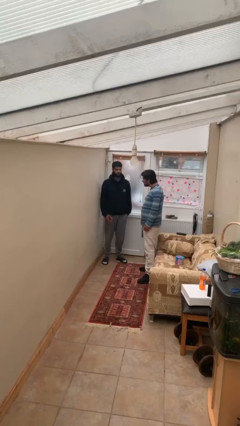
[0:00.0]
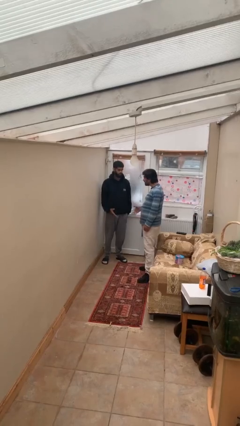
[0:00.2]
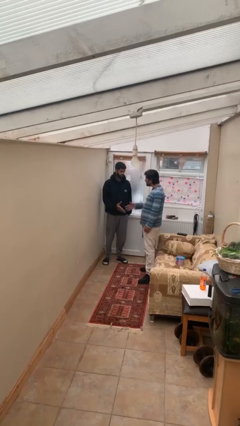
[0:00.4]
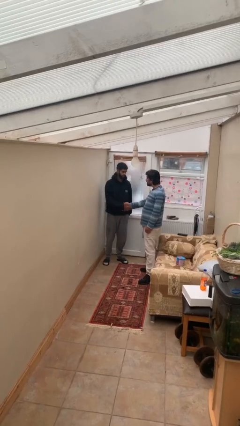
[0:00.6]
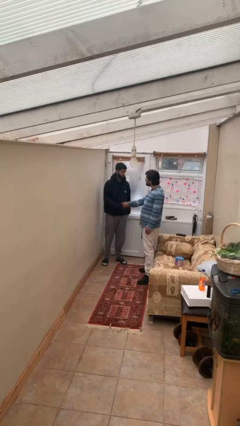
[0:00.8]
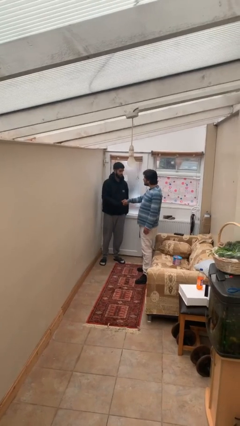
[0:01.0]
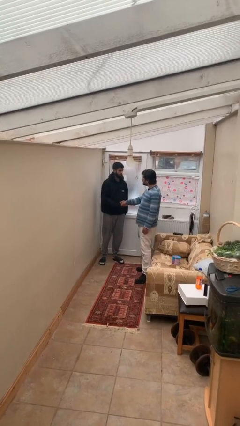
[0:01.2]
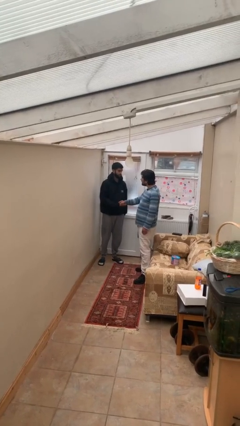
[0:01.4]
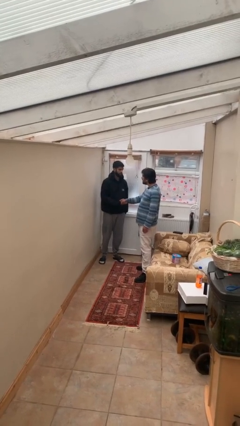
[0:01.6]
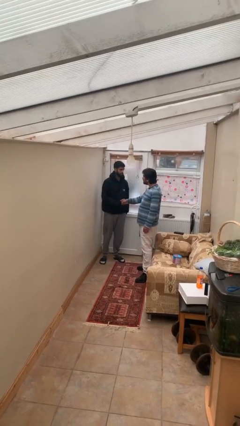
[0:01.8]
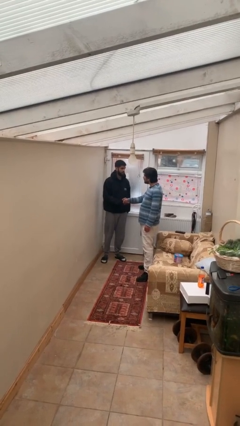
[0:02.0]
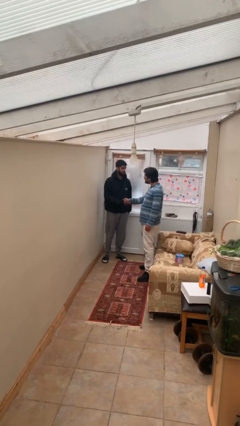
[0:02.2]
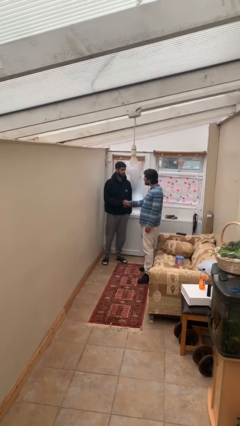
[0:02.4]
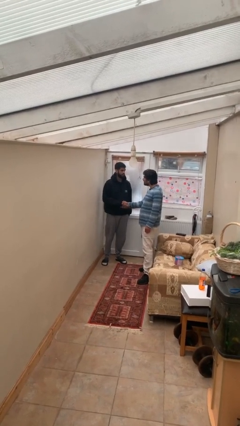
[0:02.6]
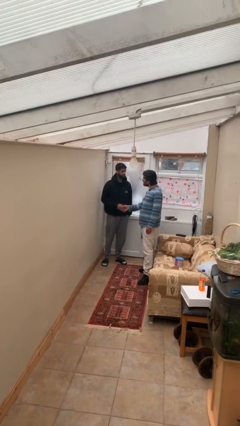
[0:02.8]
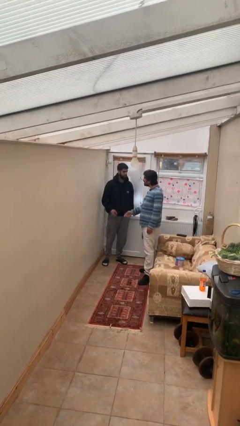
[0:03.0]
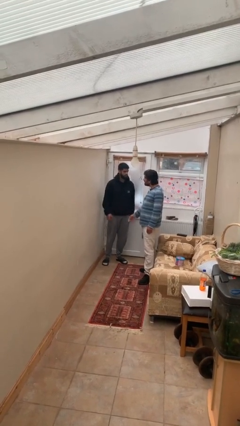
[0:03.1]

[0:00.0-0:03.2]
person shakes hand

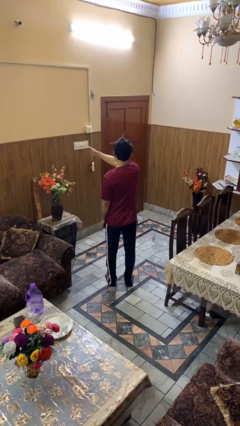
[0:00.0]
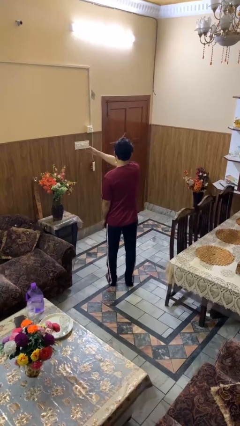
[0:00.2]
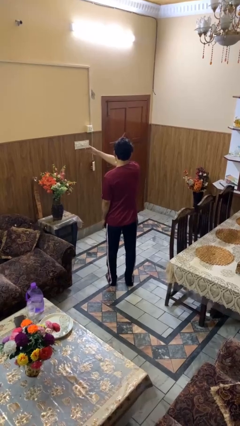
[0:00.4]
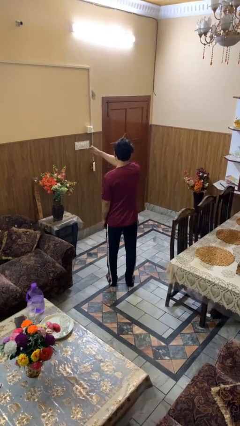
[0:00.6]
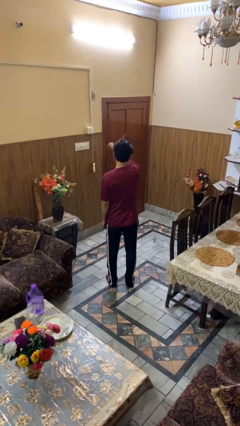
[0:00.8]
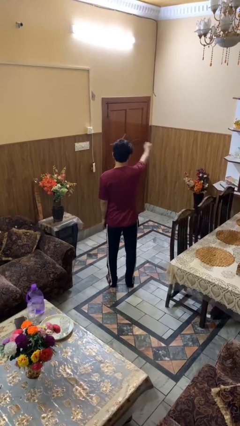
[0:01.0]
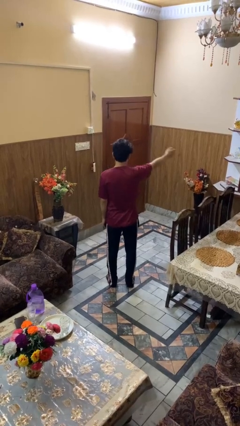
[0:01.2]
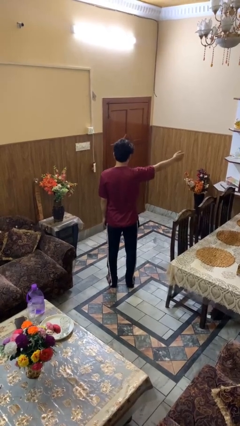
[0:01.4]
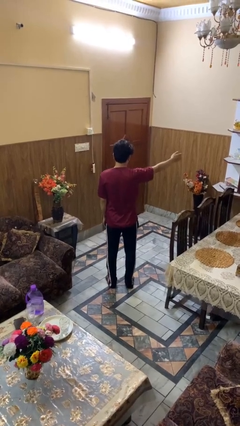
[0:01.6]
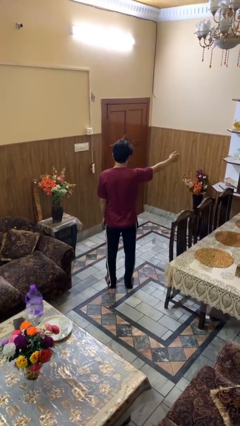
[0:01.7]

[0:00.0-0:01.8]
person gestures swipe right

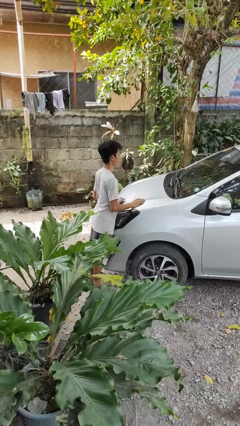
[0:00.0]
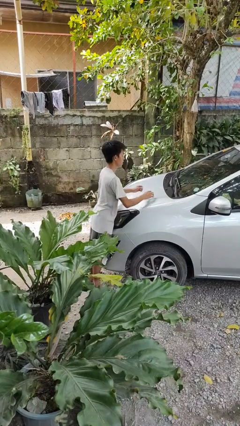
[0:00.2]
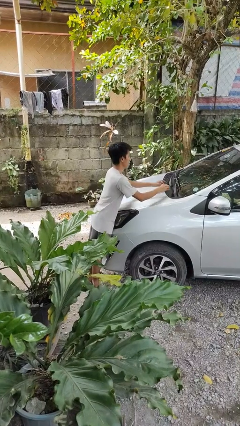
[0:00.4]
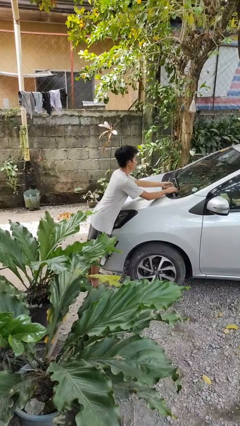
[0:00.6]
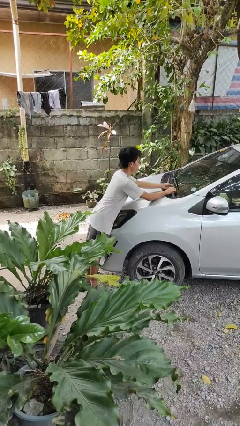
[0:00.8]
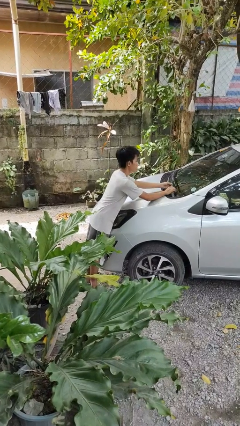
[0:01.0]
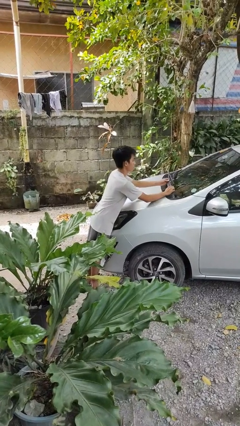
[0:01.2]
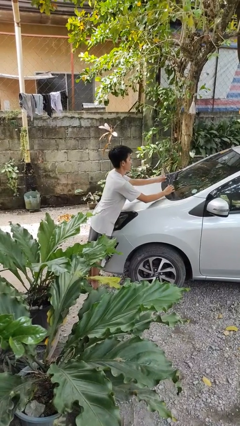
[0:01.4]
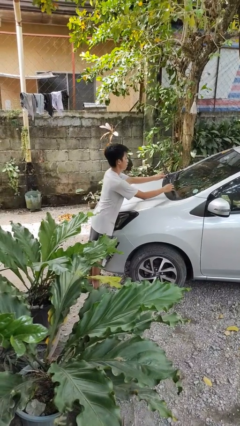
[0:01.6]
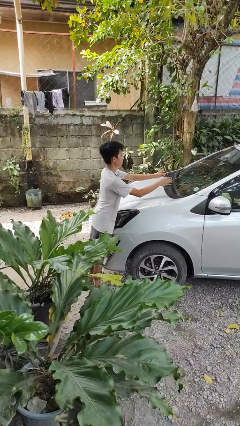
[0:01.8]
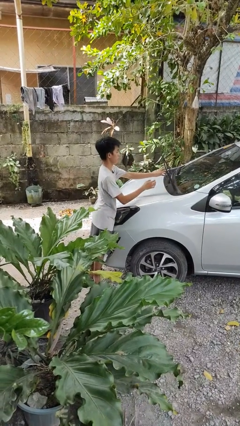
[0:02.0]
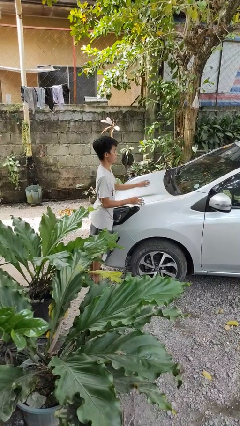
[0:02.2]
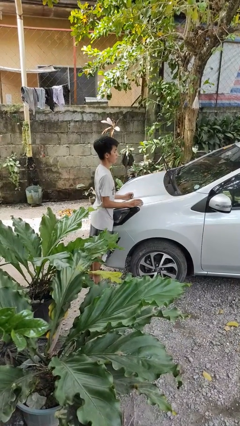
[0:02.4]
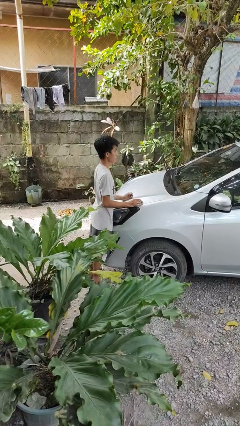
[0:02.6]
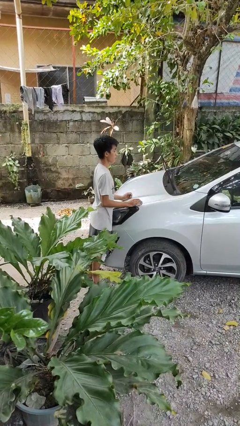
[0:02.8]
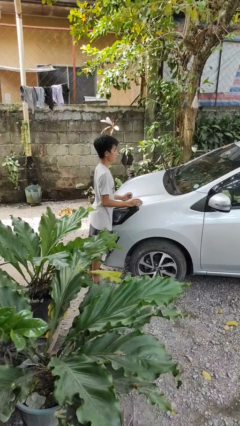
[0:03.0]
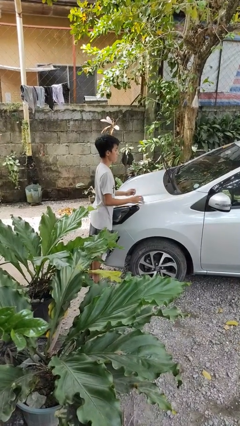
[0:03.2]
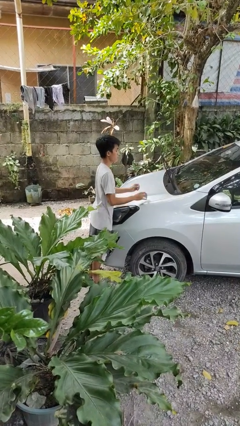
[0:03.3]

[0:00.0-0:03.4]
person flips up car wipers

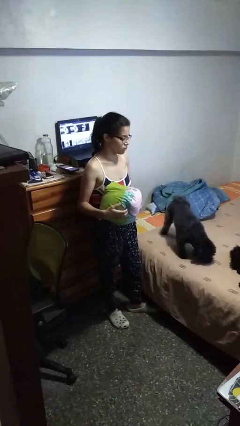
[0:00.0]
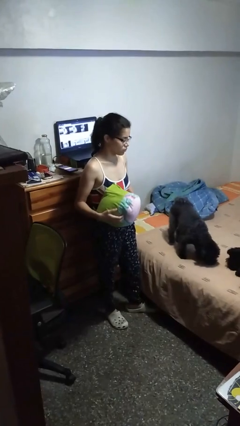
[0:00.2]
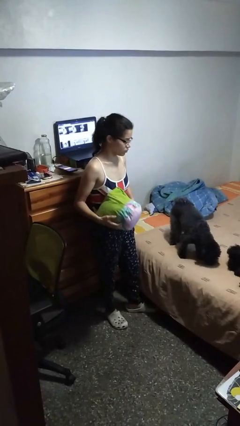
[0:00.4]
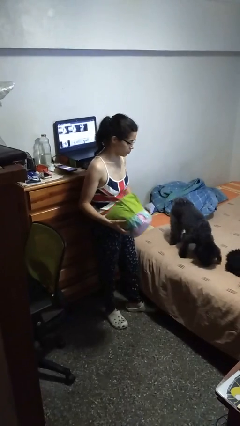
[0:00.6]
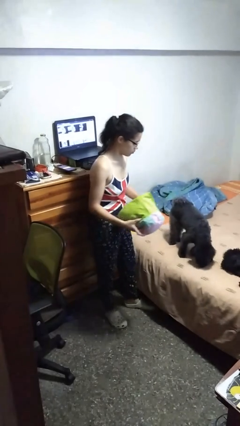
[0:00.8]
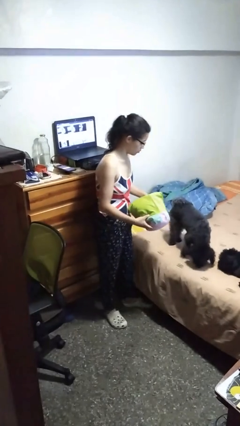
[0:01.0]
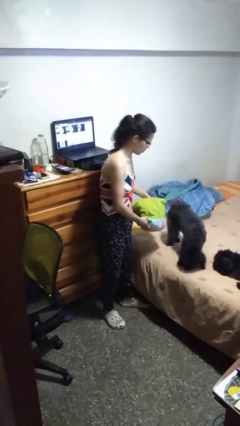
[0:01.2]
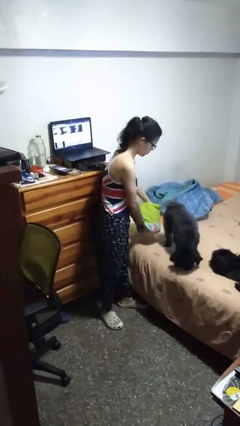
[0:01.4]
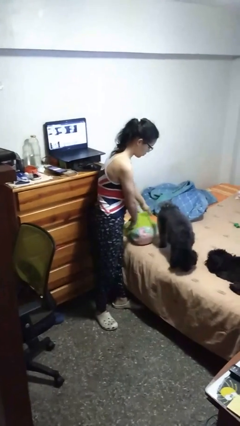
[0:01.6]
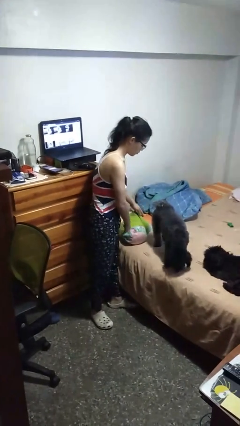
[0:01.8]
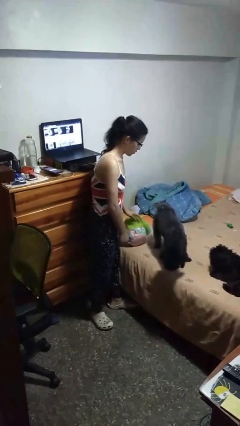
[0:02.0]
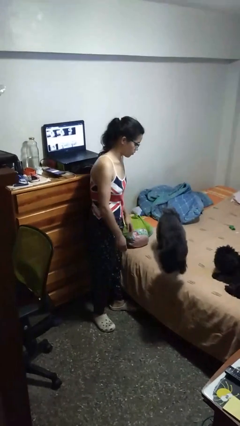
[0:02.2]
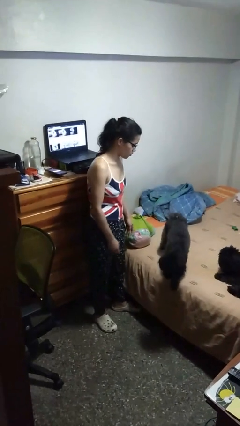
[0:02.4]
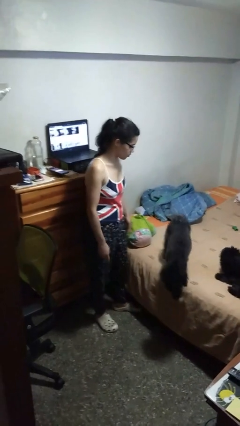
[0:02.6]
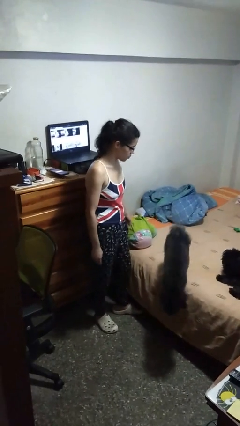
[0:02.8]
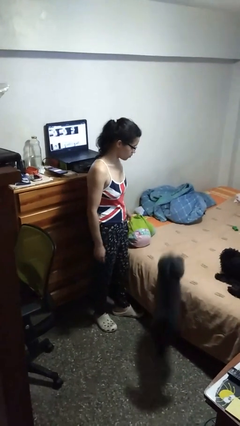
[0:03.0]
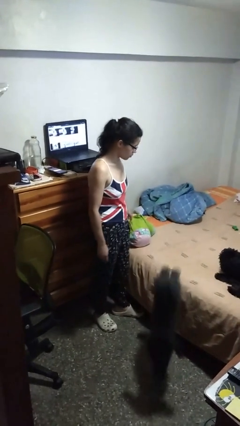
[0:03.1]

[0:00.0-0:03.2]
person puts down object on bed

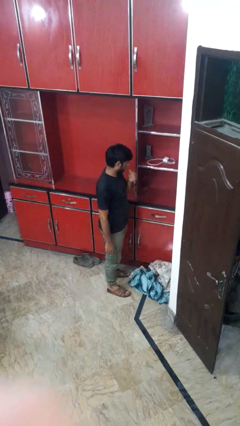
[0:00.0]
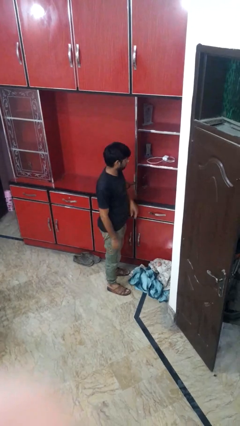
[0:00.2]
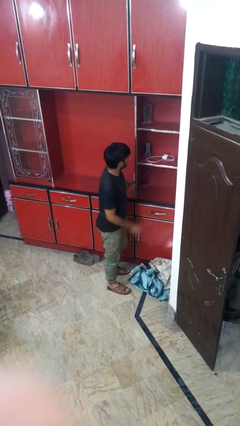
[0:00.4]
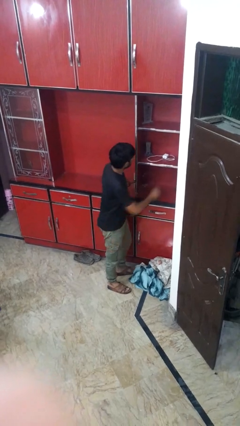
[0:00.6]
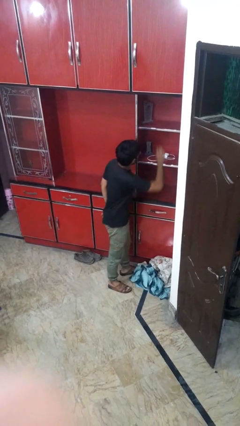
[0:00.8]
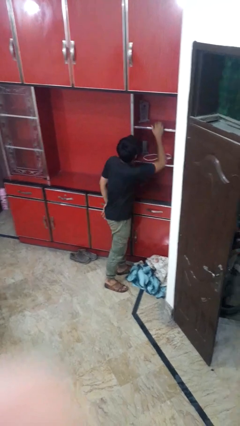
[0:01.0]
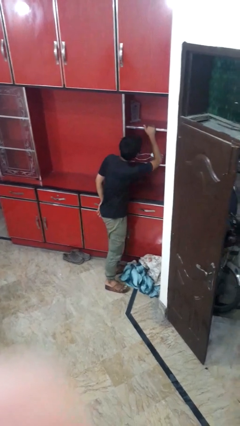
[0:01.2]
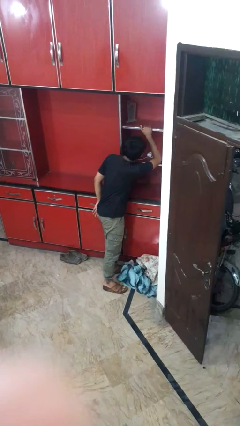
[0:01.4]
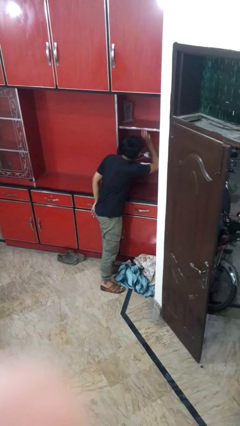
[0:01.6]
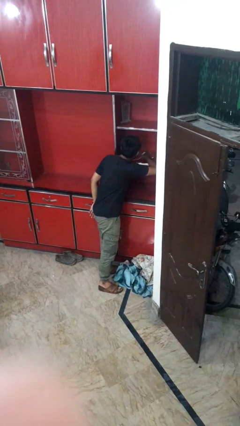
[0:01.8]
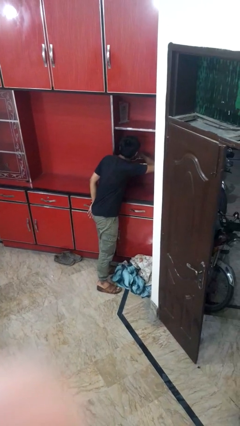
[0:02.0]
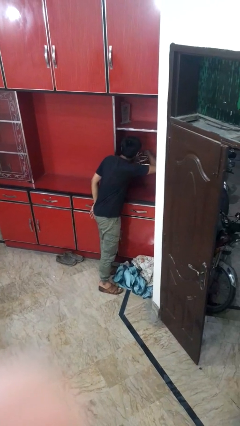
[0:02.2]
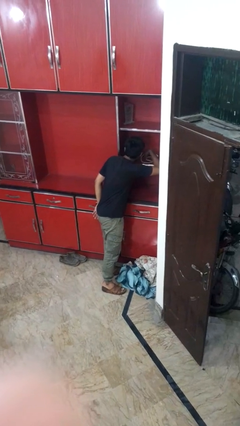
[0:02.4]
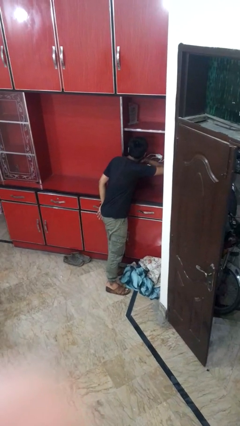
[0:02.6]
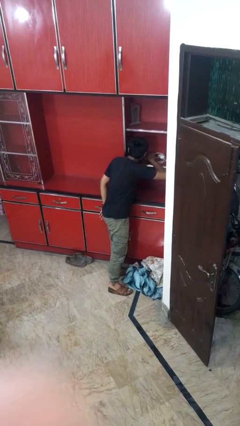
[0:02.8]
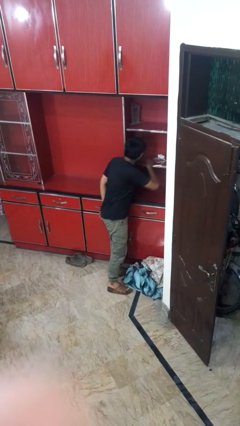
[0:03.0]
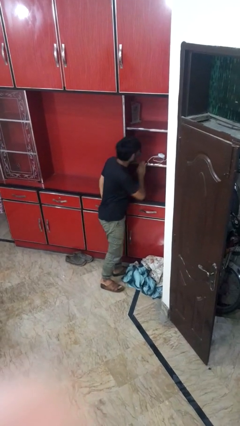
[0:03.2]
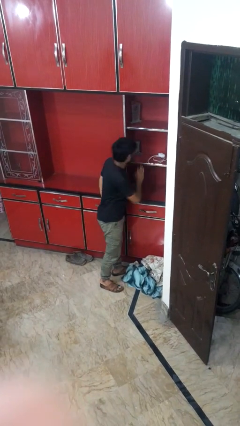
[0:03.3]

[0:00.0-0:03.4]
person searches in cabinet

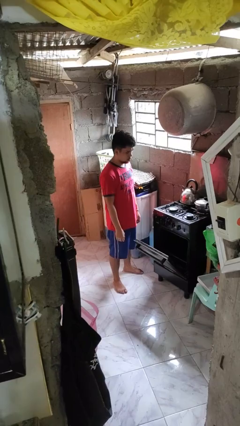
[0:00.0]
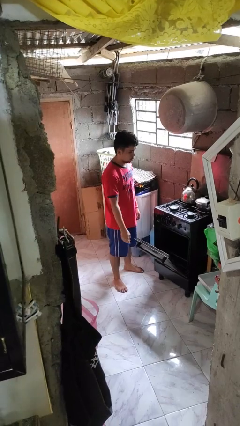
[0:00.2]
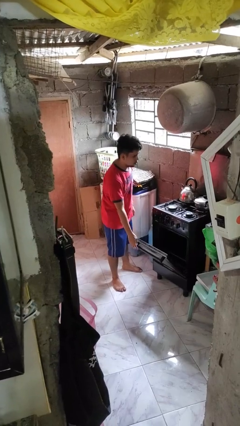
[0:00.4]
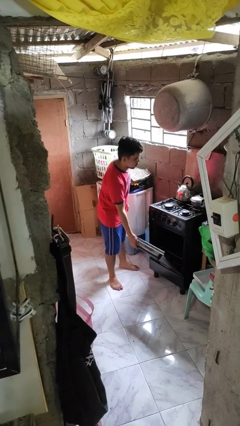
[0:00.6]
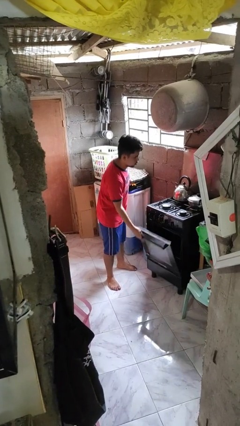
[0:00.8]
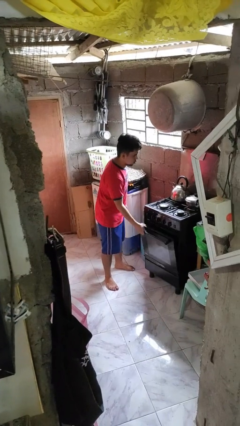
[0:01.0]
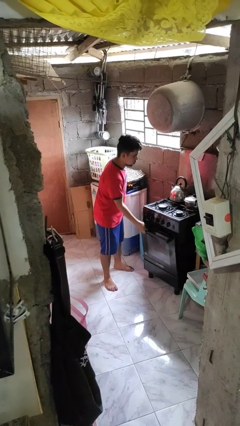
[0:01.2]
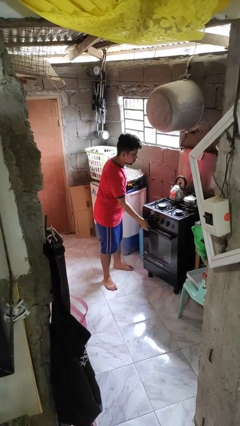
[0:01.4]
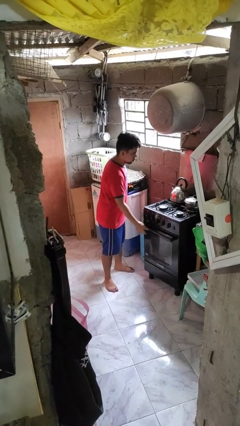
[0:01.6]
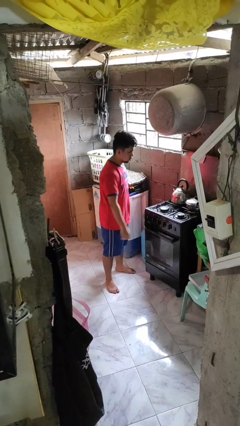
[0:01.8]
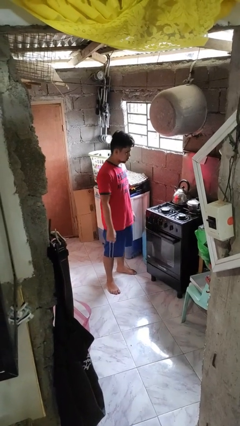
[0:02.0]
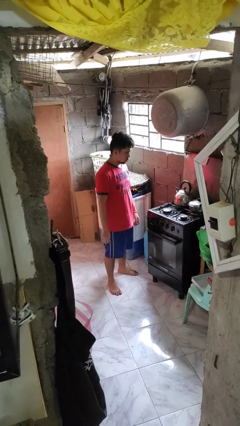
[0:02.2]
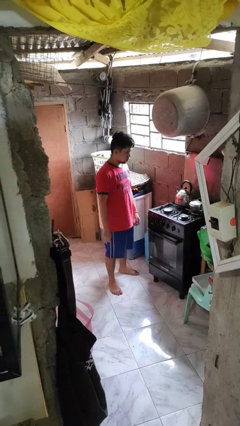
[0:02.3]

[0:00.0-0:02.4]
person closes oven door

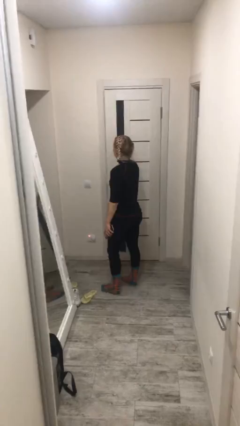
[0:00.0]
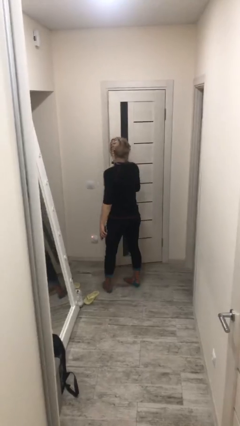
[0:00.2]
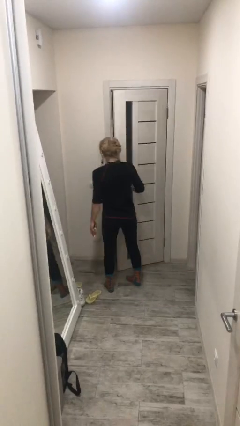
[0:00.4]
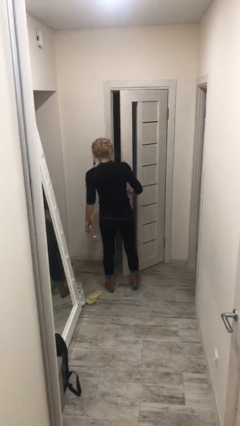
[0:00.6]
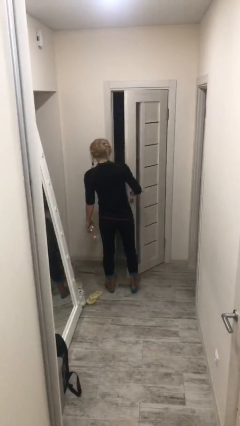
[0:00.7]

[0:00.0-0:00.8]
person opens facility door
